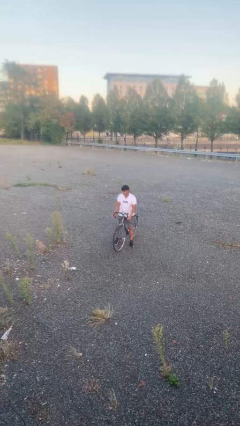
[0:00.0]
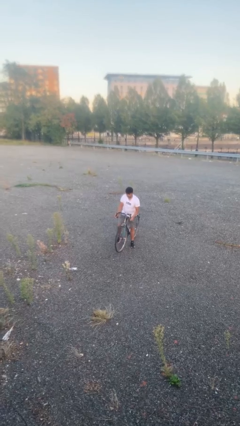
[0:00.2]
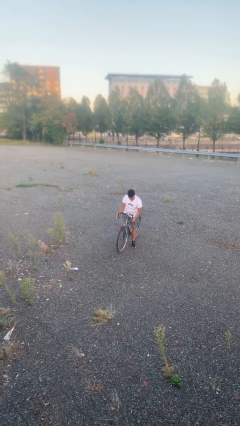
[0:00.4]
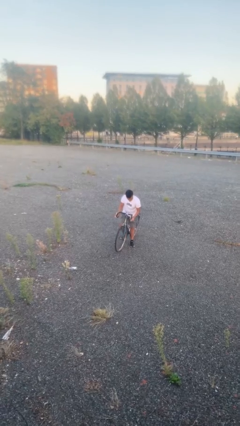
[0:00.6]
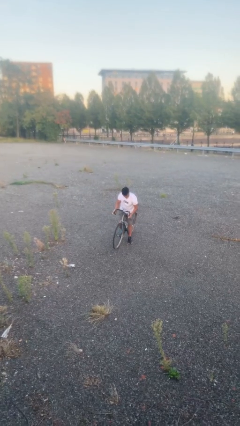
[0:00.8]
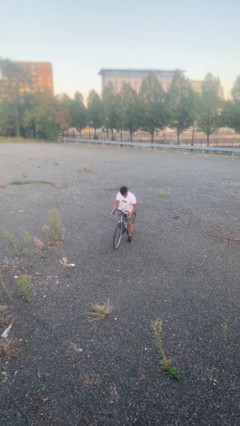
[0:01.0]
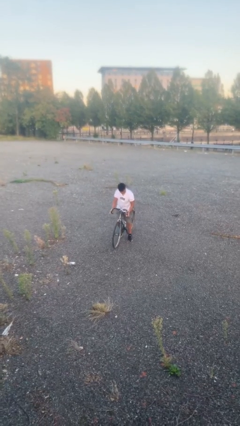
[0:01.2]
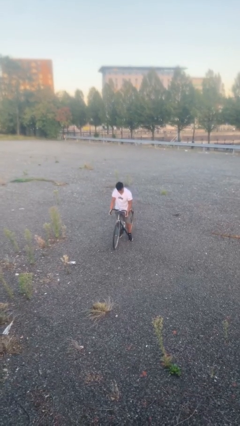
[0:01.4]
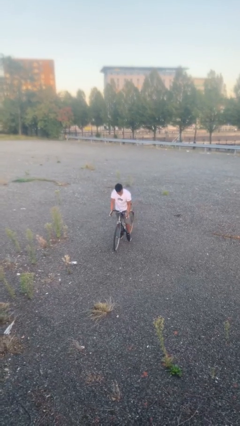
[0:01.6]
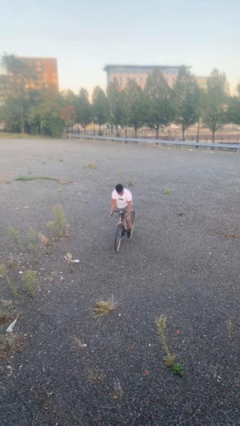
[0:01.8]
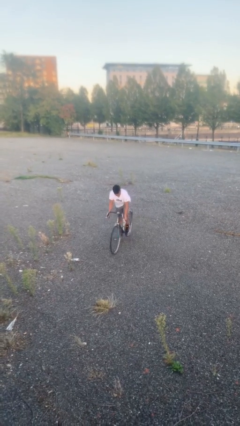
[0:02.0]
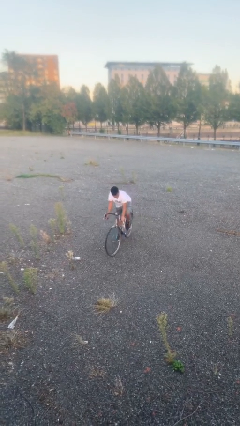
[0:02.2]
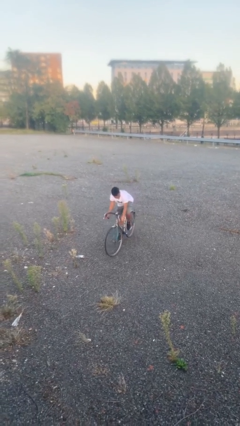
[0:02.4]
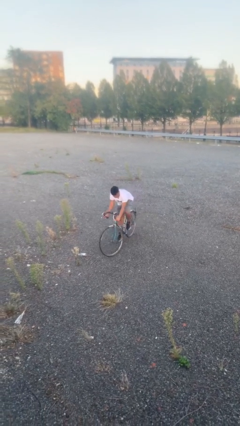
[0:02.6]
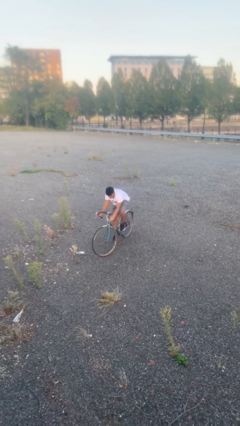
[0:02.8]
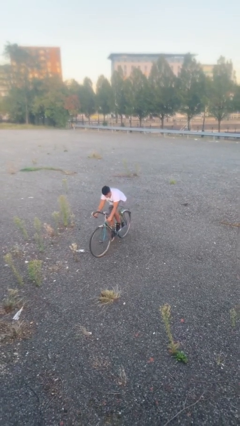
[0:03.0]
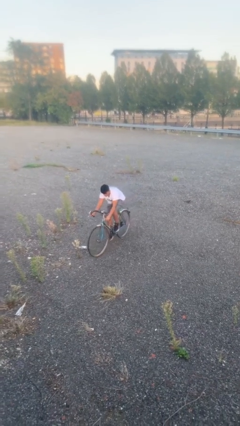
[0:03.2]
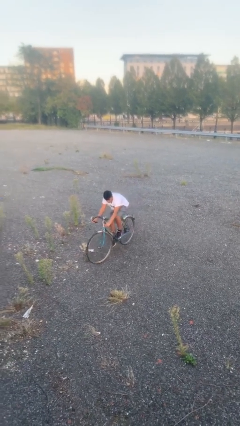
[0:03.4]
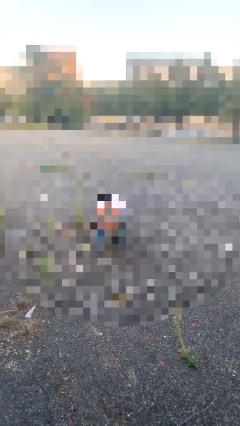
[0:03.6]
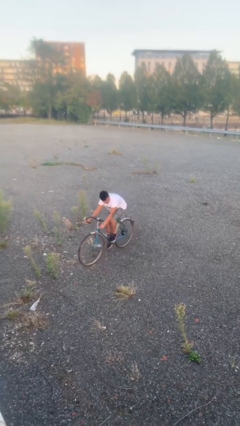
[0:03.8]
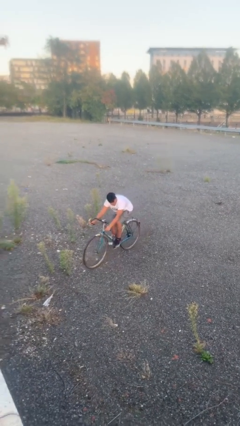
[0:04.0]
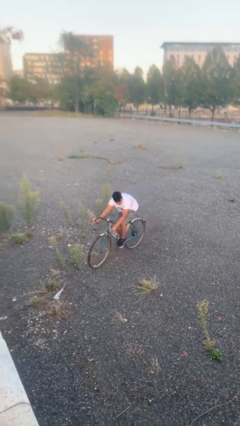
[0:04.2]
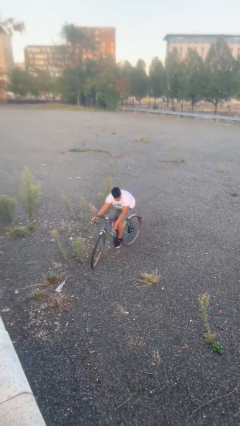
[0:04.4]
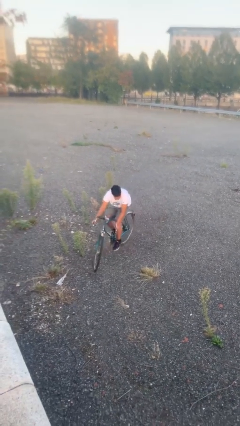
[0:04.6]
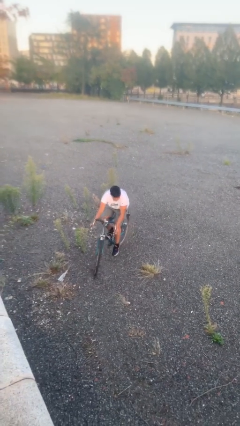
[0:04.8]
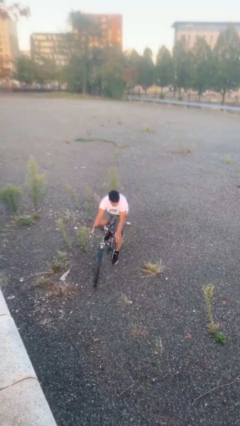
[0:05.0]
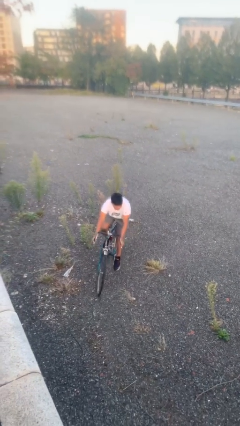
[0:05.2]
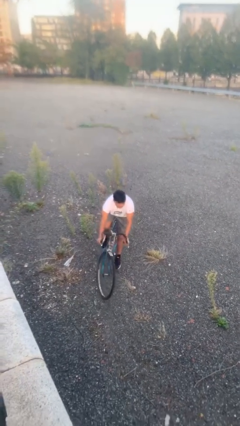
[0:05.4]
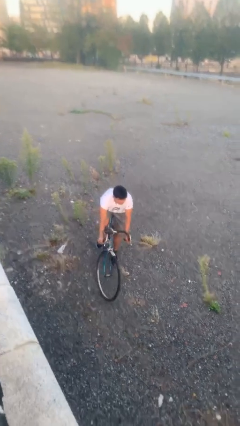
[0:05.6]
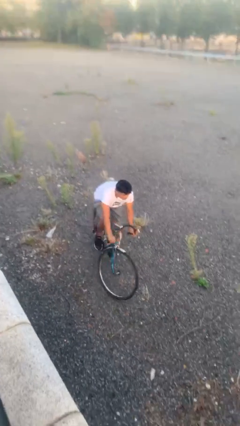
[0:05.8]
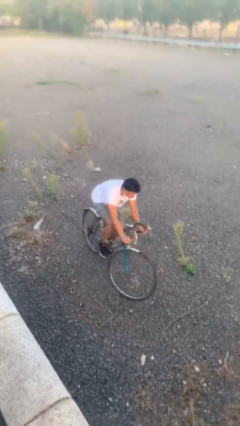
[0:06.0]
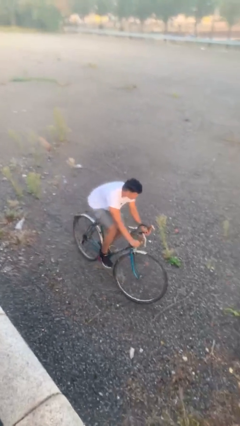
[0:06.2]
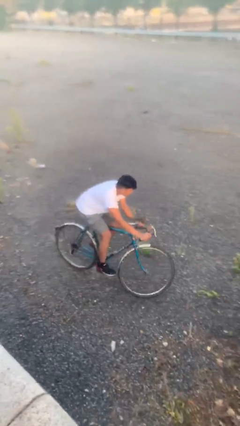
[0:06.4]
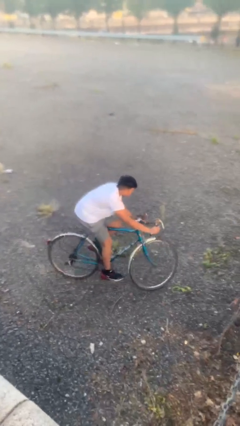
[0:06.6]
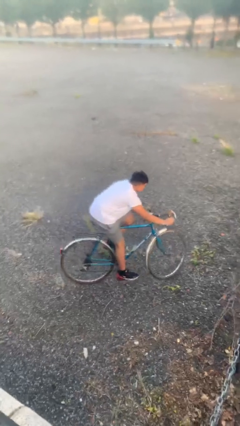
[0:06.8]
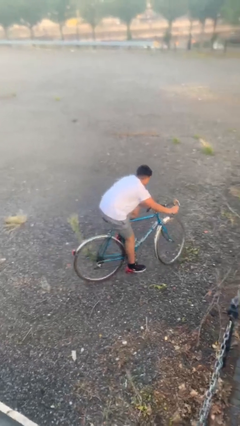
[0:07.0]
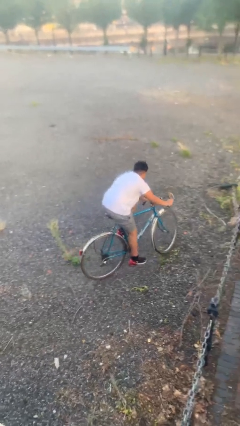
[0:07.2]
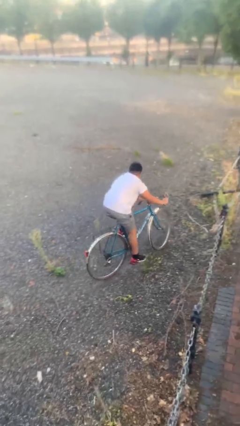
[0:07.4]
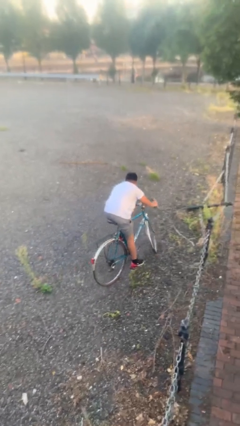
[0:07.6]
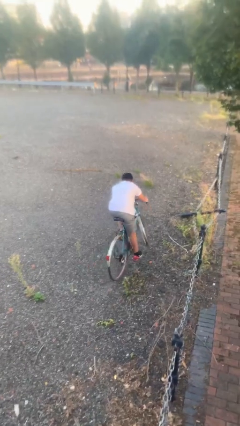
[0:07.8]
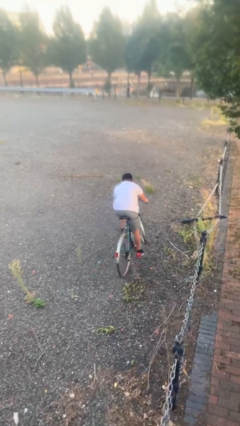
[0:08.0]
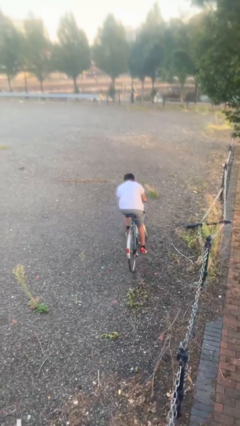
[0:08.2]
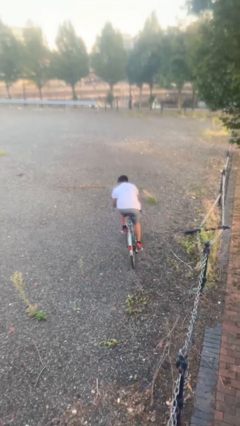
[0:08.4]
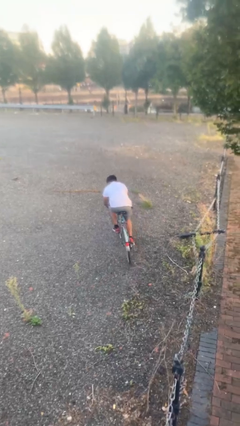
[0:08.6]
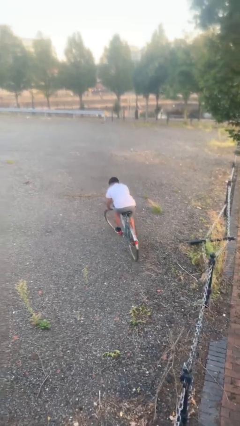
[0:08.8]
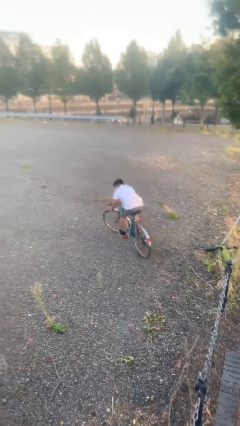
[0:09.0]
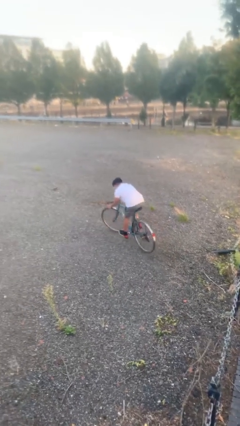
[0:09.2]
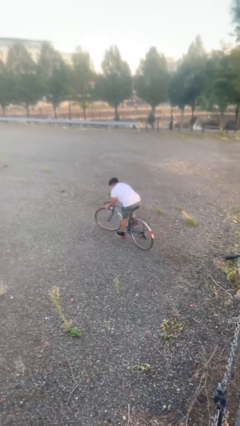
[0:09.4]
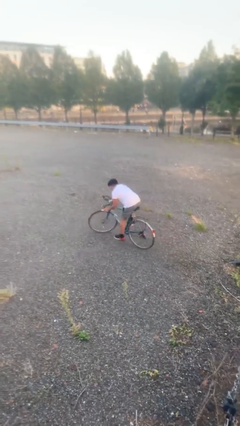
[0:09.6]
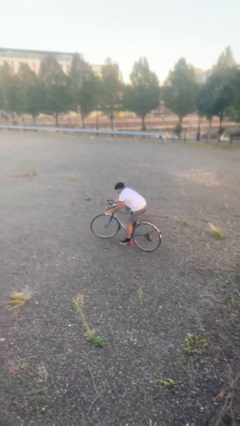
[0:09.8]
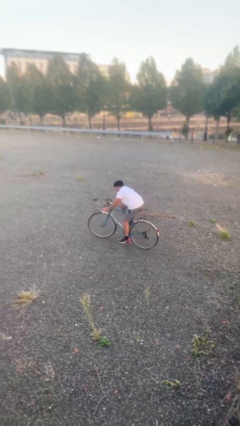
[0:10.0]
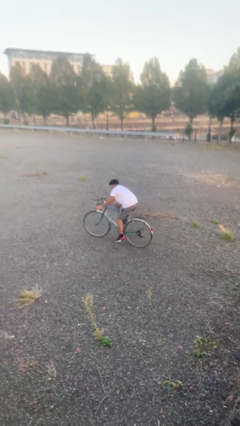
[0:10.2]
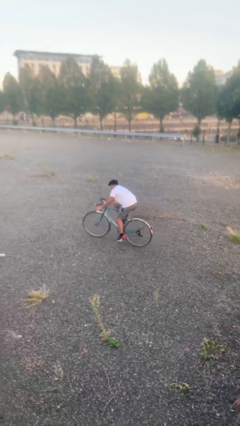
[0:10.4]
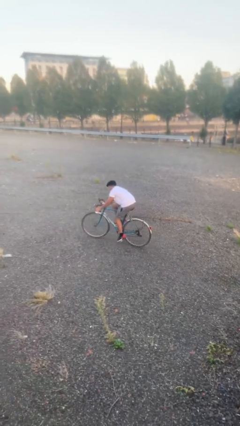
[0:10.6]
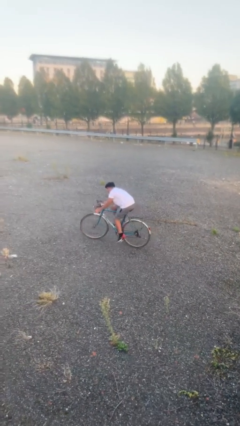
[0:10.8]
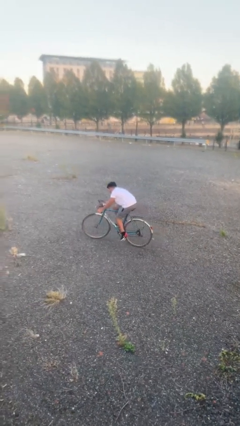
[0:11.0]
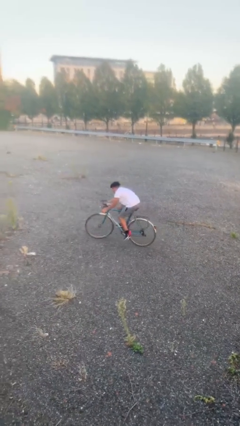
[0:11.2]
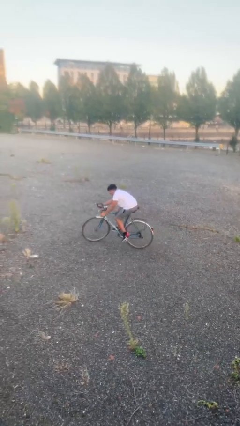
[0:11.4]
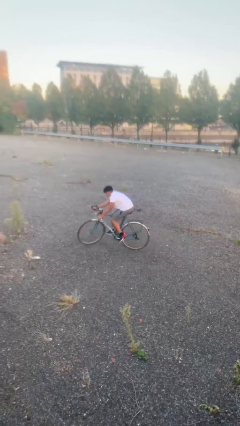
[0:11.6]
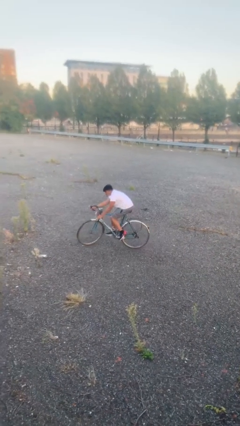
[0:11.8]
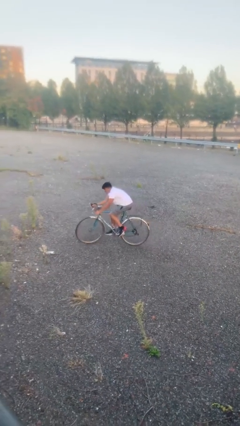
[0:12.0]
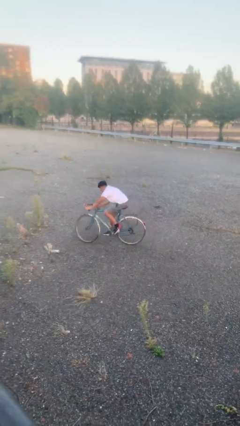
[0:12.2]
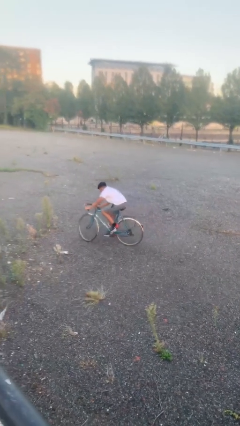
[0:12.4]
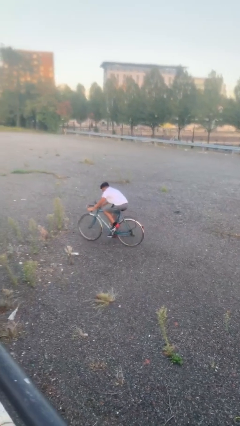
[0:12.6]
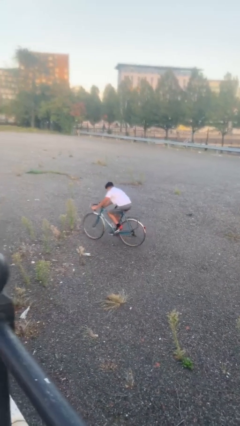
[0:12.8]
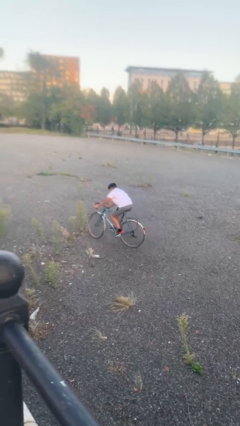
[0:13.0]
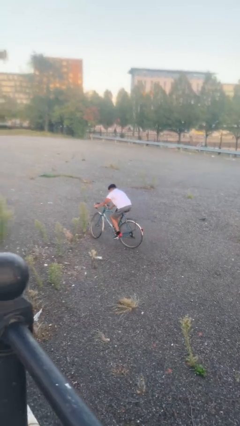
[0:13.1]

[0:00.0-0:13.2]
person rides bicycle

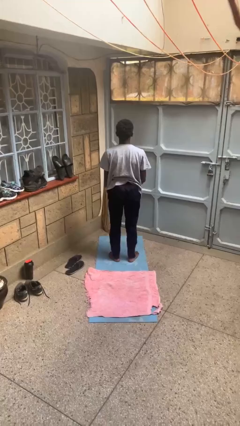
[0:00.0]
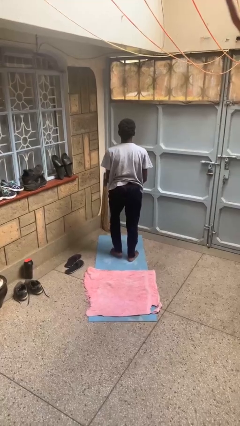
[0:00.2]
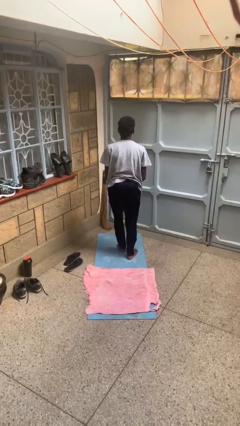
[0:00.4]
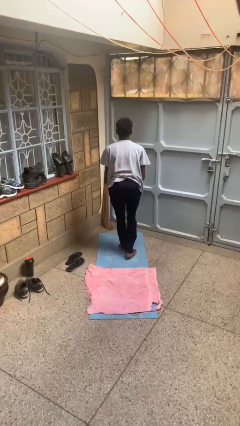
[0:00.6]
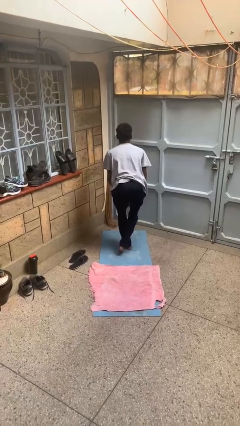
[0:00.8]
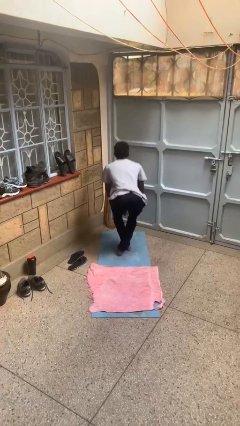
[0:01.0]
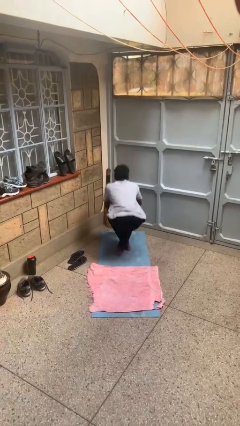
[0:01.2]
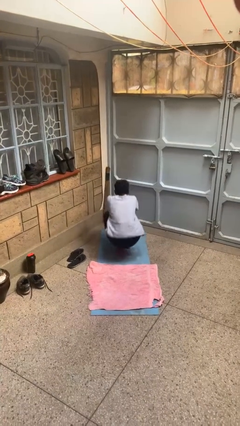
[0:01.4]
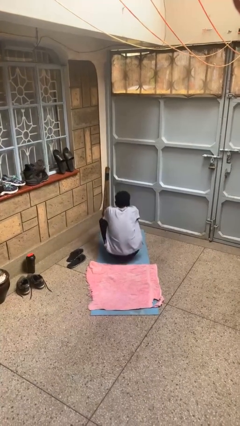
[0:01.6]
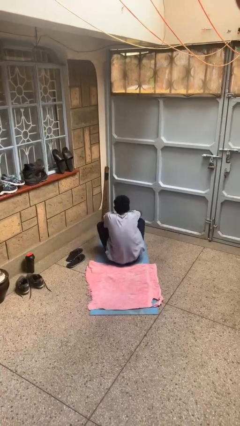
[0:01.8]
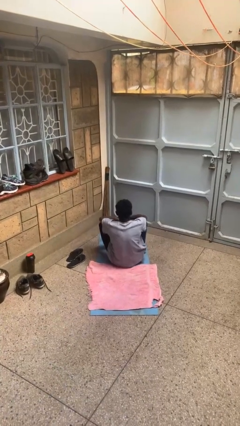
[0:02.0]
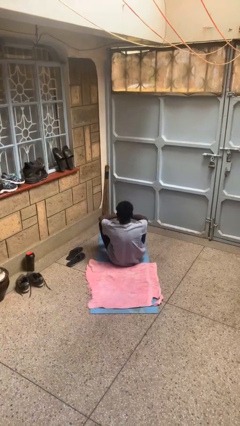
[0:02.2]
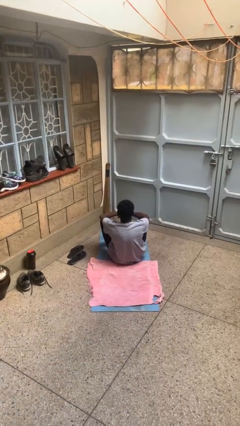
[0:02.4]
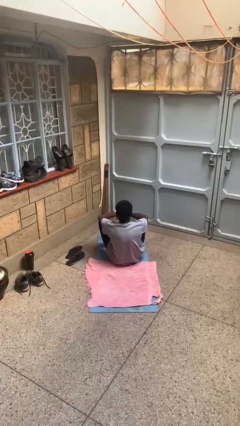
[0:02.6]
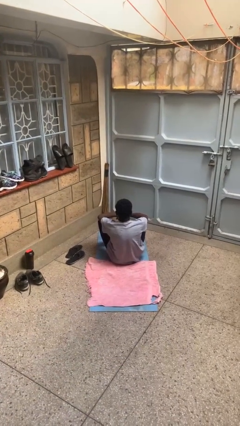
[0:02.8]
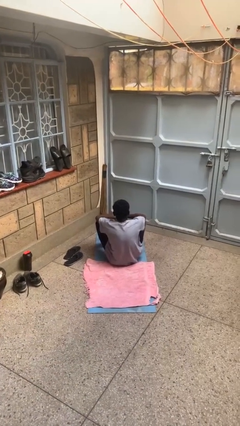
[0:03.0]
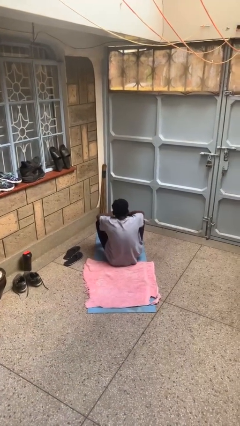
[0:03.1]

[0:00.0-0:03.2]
person sits crisscross

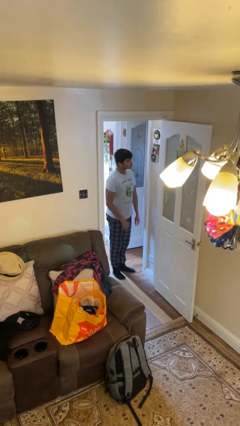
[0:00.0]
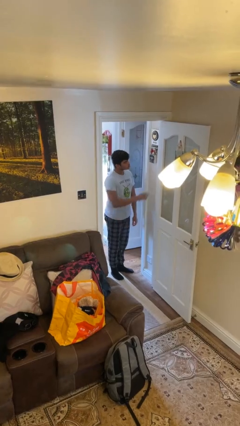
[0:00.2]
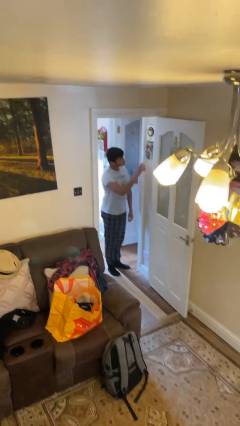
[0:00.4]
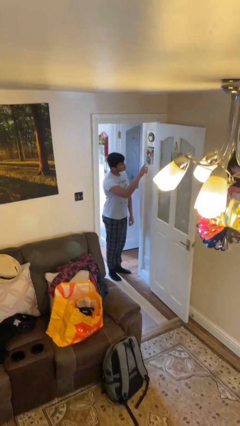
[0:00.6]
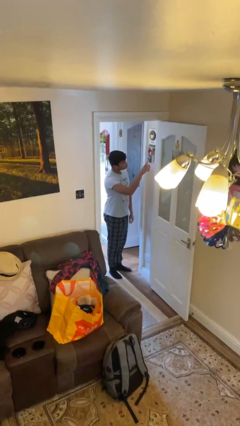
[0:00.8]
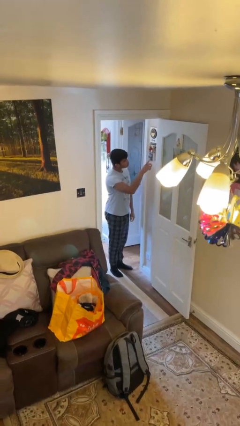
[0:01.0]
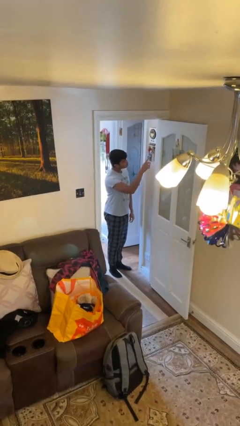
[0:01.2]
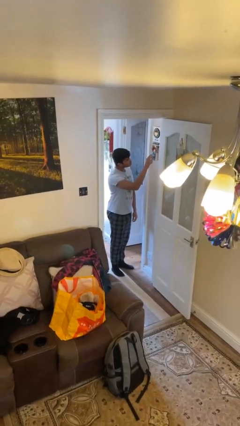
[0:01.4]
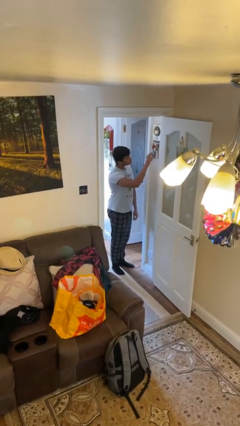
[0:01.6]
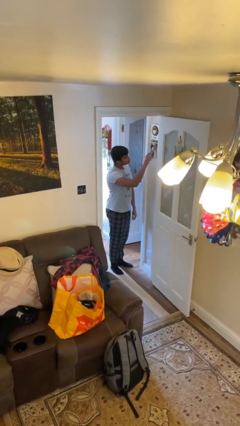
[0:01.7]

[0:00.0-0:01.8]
person adjusts thermostat
